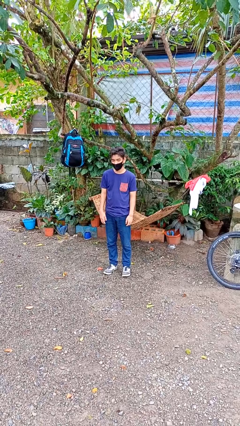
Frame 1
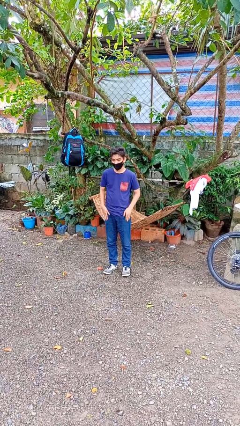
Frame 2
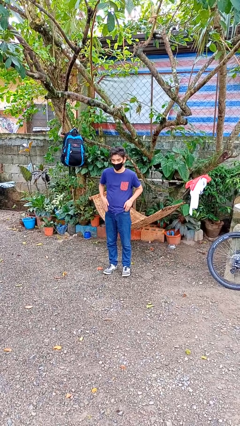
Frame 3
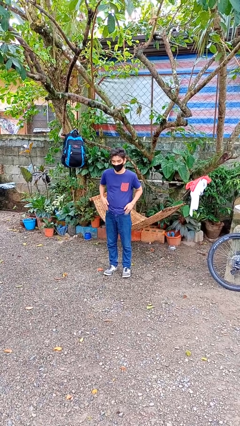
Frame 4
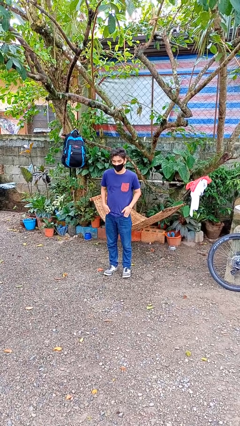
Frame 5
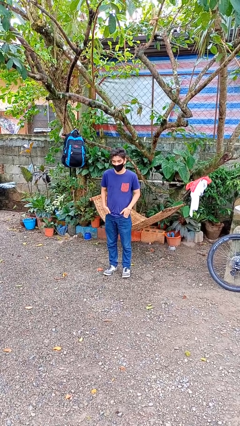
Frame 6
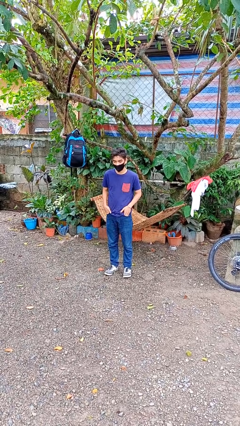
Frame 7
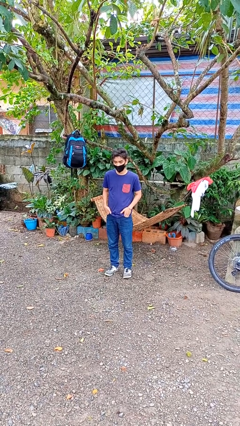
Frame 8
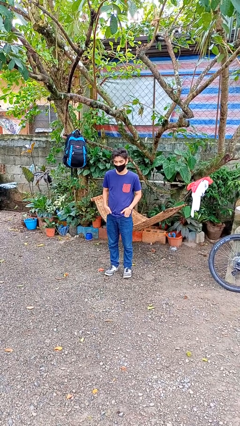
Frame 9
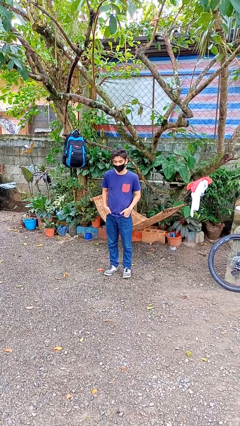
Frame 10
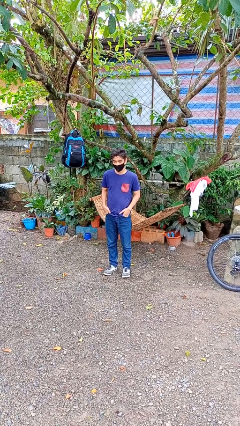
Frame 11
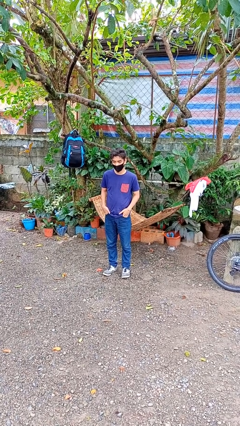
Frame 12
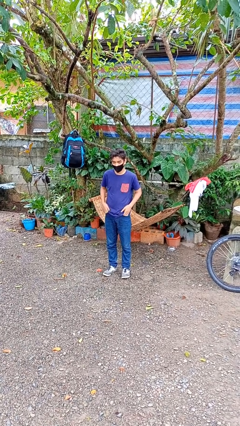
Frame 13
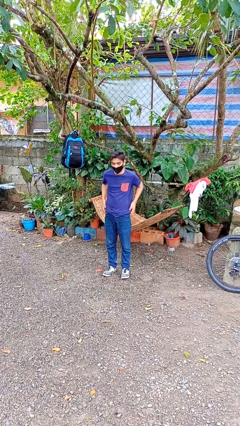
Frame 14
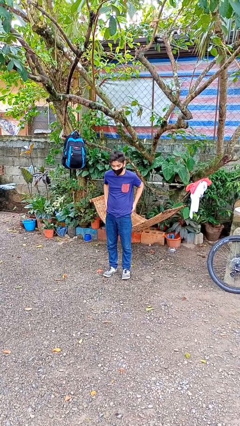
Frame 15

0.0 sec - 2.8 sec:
person puts hands in back pockets

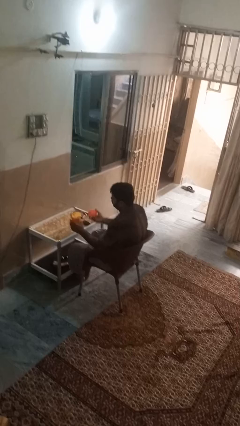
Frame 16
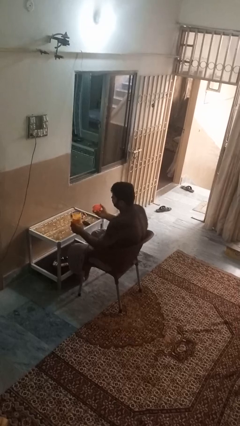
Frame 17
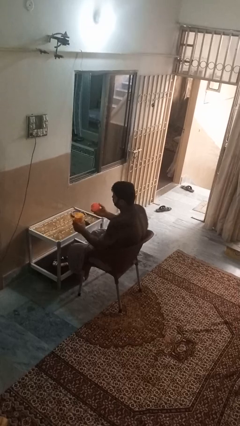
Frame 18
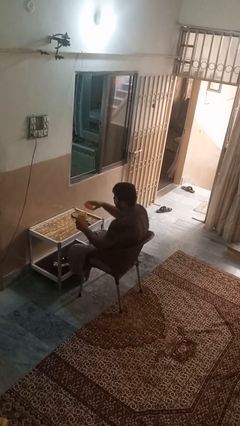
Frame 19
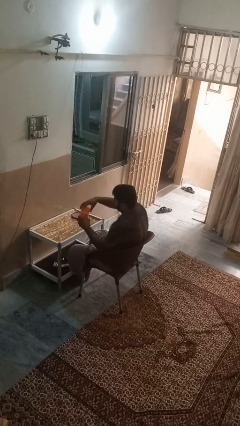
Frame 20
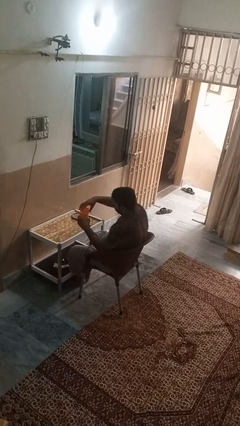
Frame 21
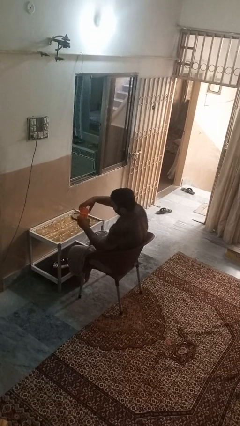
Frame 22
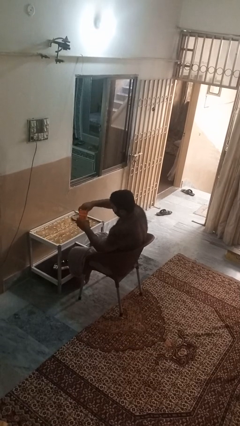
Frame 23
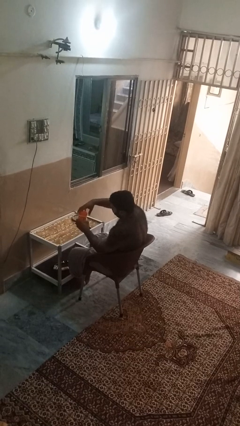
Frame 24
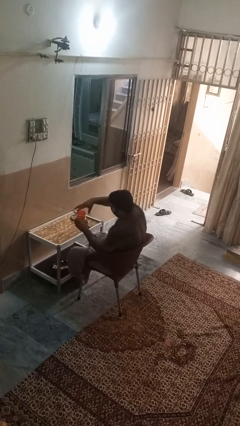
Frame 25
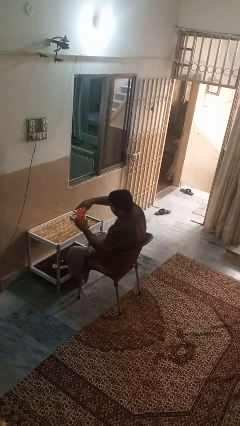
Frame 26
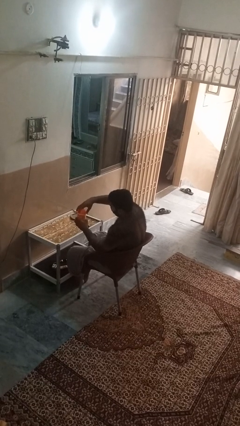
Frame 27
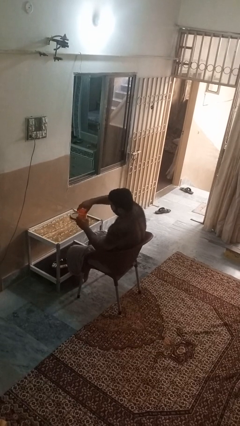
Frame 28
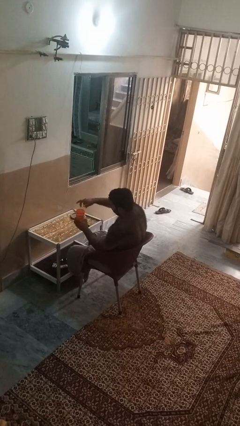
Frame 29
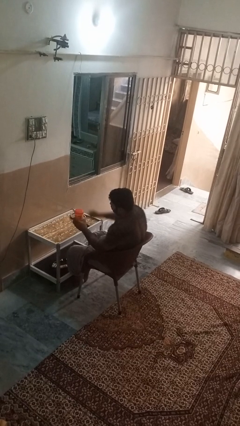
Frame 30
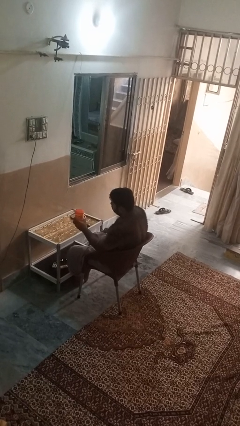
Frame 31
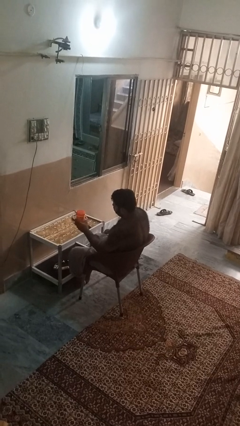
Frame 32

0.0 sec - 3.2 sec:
person closes jar

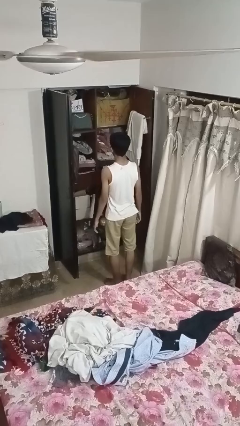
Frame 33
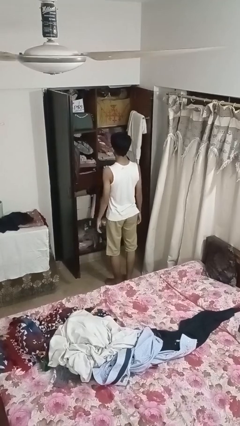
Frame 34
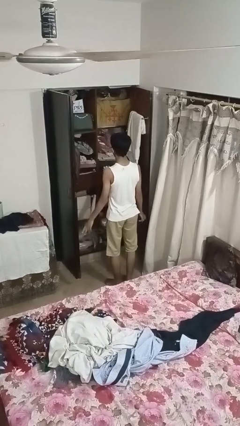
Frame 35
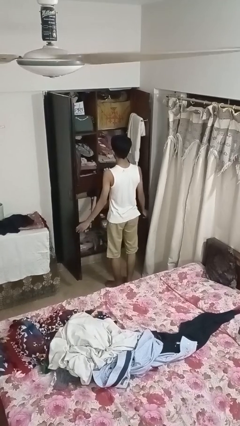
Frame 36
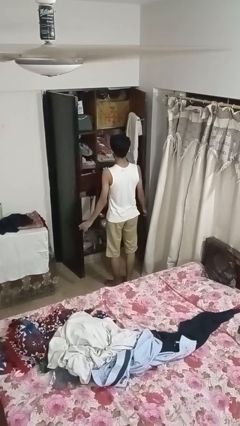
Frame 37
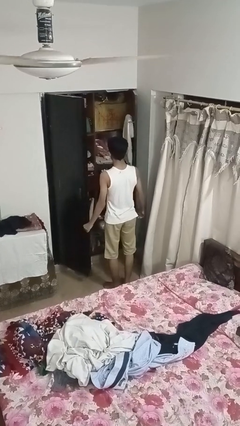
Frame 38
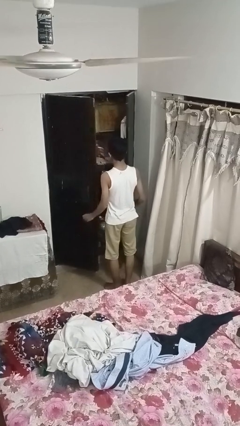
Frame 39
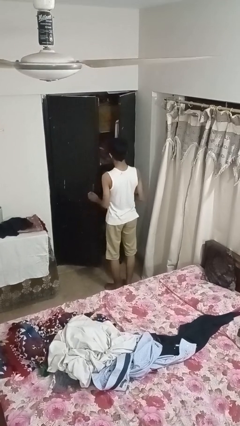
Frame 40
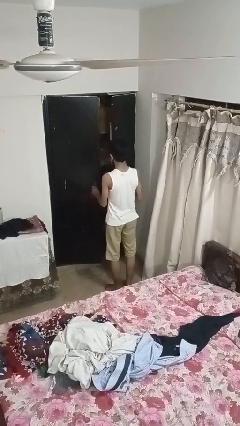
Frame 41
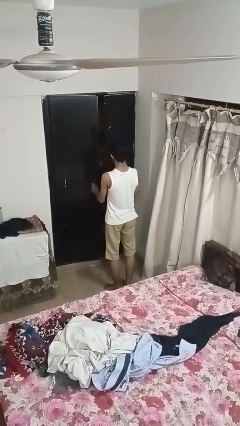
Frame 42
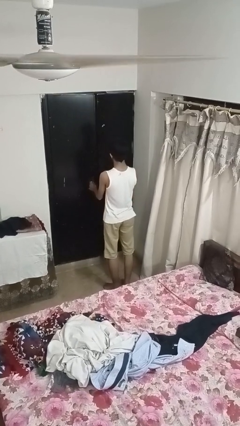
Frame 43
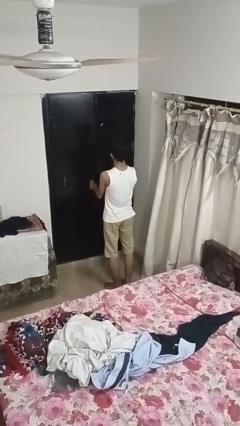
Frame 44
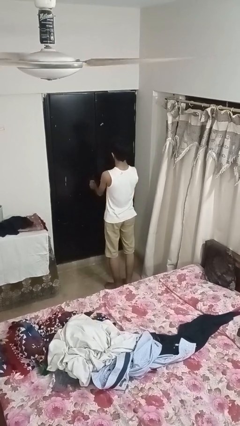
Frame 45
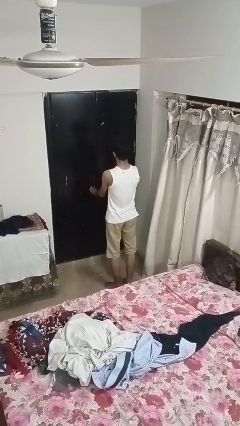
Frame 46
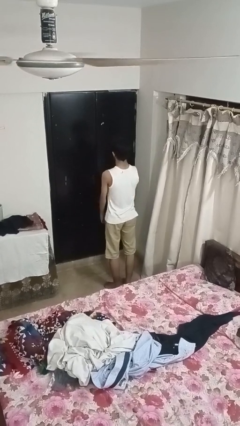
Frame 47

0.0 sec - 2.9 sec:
person closes closet door

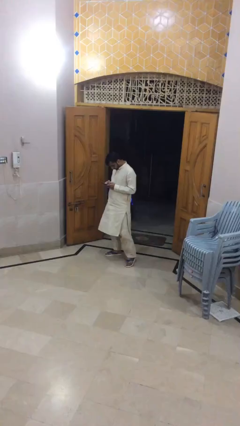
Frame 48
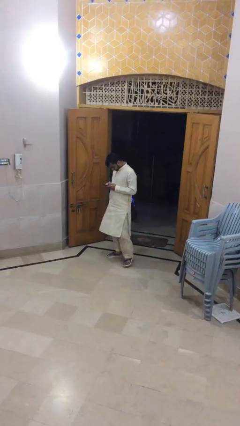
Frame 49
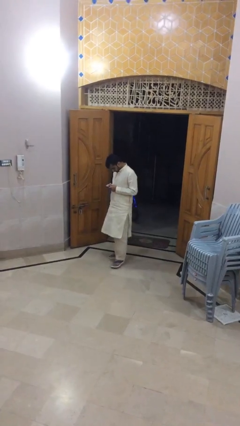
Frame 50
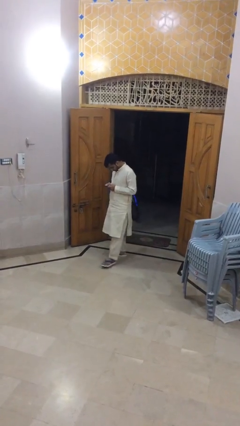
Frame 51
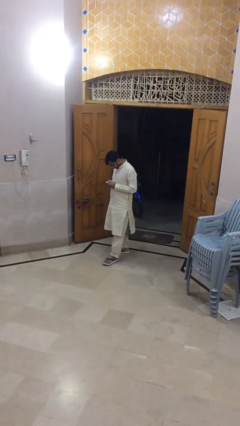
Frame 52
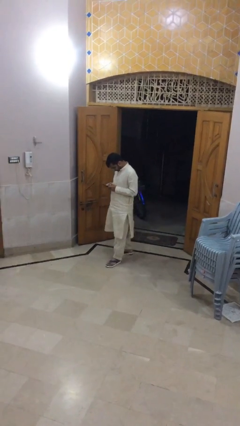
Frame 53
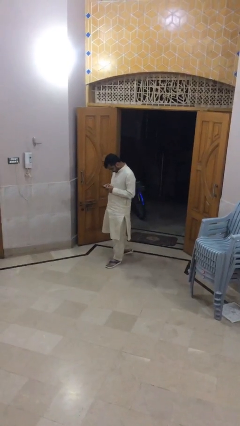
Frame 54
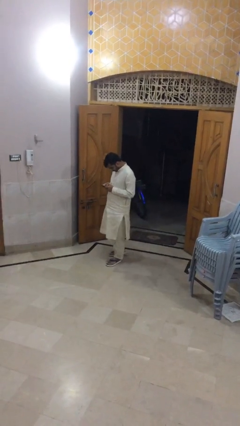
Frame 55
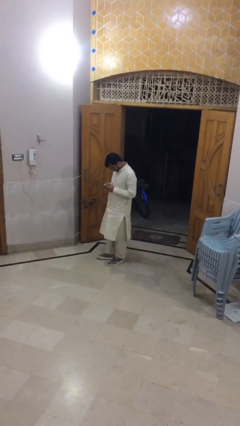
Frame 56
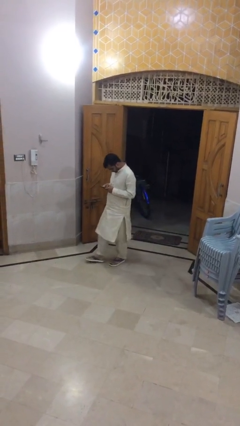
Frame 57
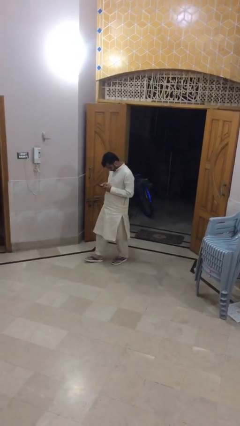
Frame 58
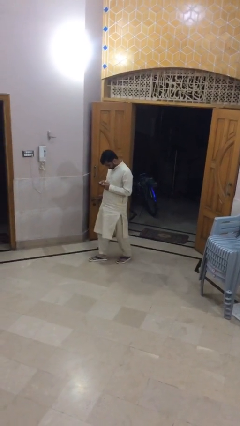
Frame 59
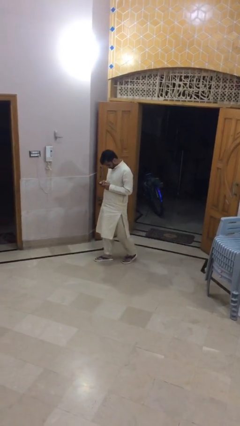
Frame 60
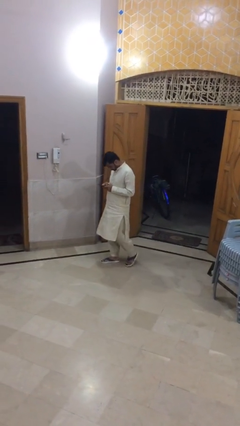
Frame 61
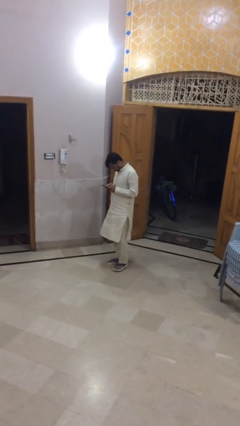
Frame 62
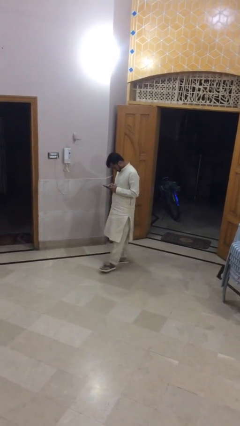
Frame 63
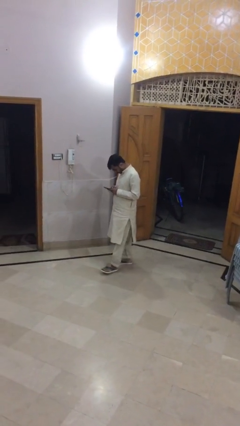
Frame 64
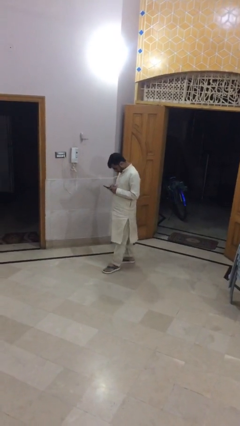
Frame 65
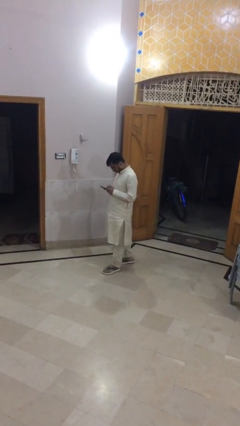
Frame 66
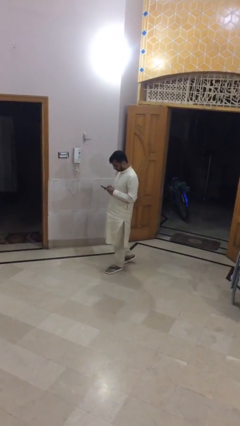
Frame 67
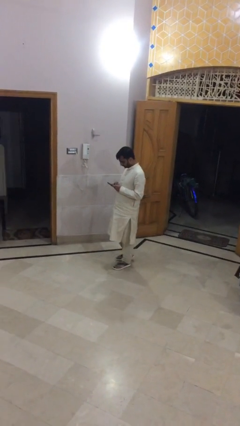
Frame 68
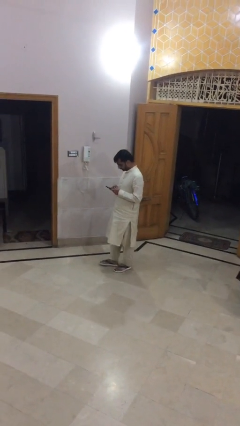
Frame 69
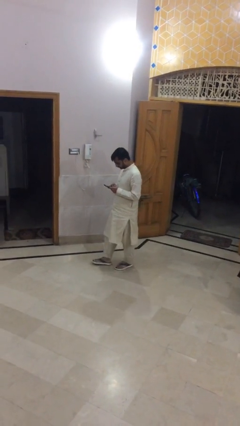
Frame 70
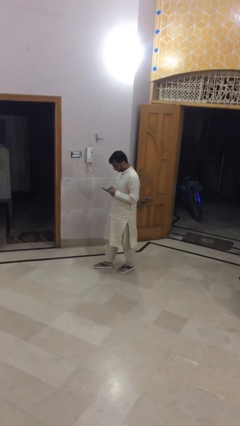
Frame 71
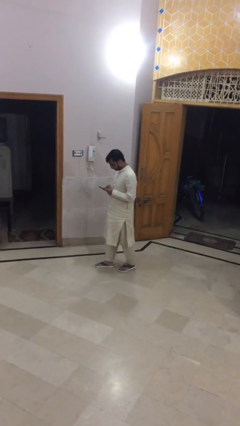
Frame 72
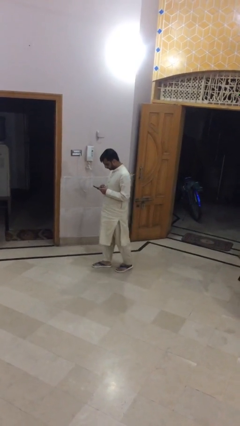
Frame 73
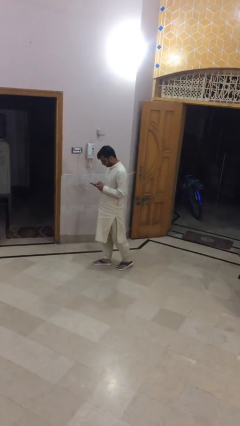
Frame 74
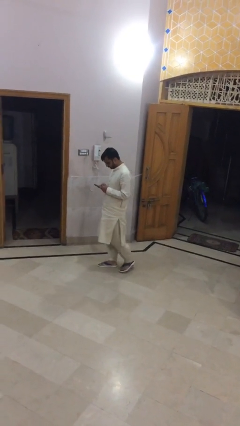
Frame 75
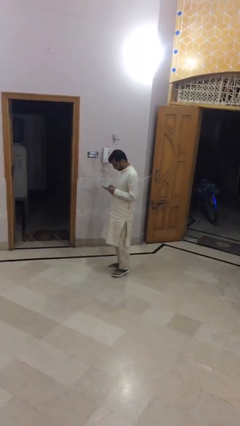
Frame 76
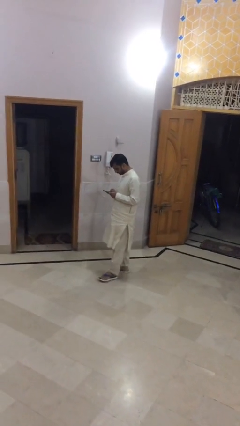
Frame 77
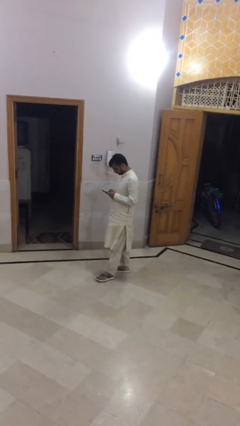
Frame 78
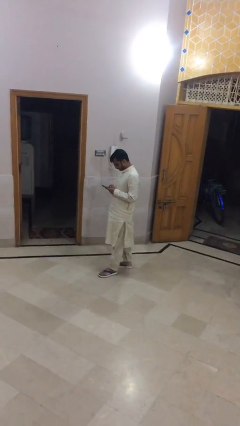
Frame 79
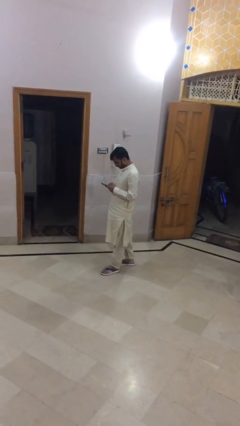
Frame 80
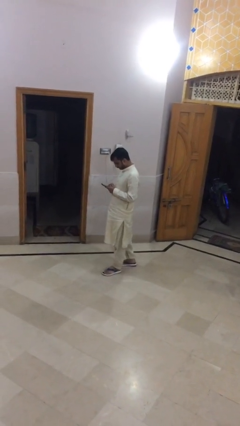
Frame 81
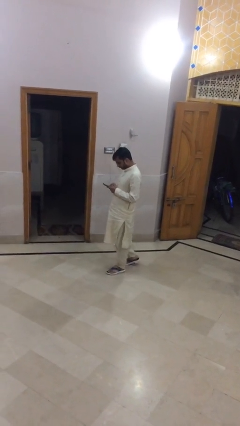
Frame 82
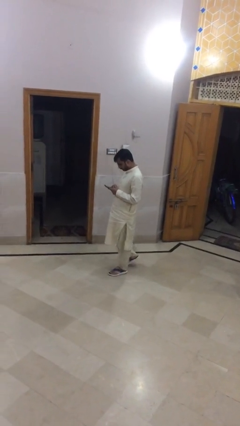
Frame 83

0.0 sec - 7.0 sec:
person texts on phone

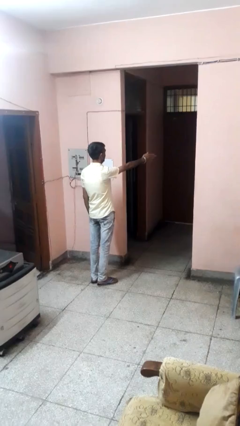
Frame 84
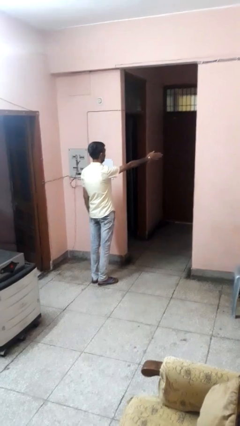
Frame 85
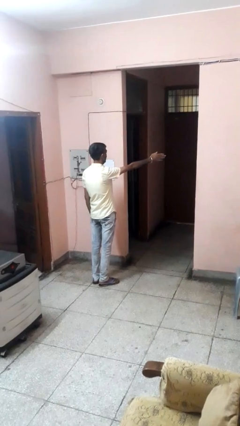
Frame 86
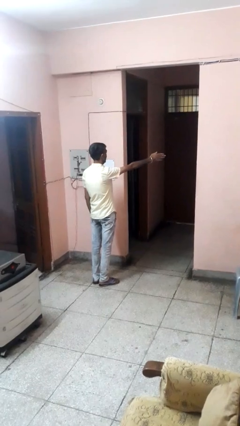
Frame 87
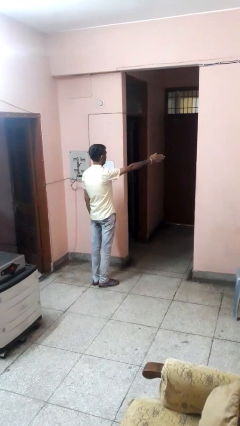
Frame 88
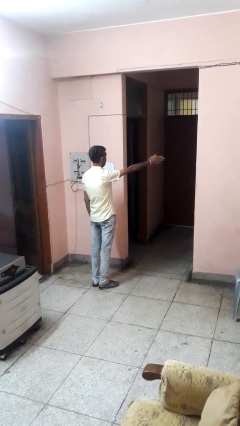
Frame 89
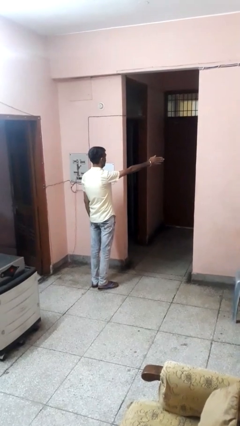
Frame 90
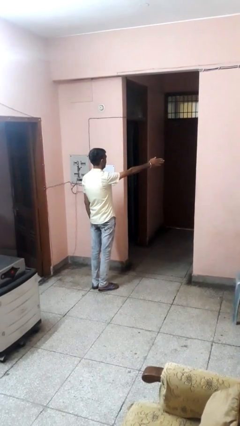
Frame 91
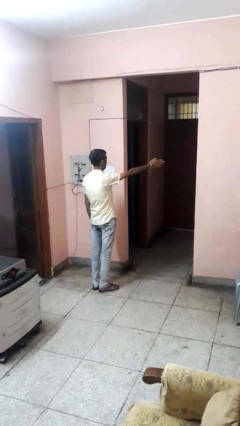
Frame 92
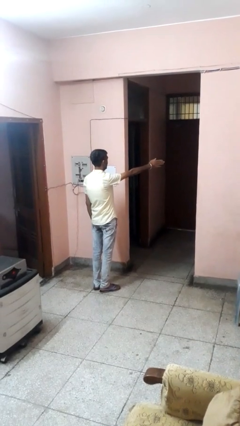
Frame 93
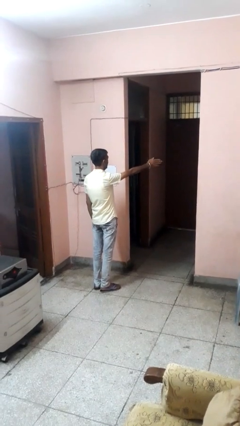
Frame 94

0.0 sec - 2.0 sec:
person gestures swipe left
